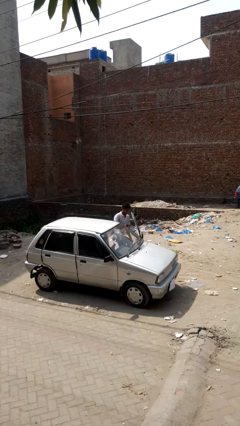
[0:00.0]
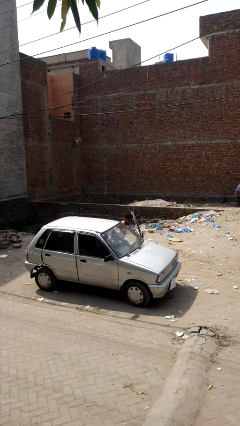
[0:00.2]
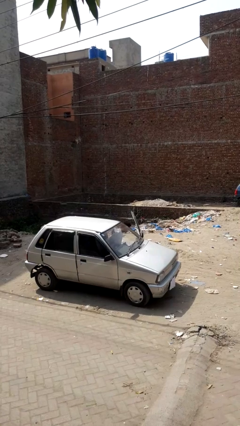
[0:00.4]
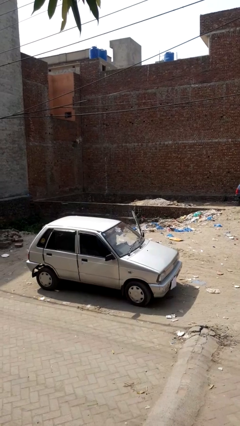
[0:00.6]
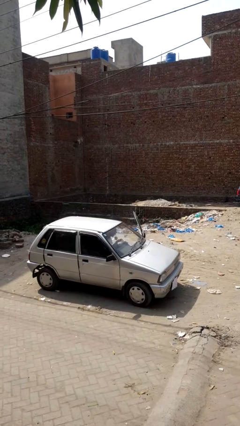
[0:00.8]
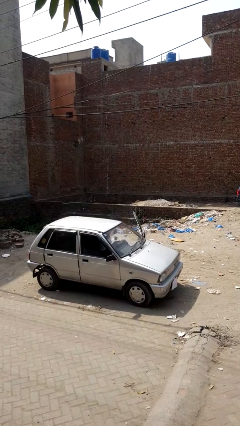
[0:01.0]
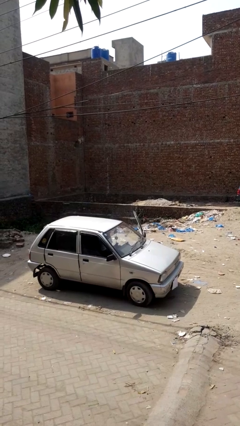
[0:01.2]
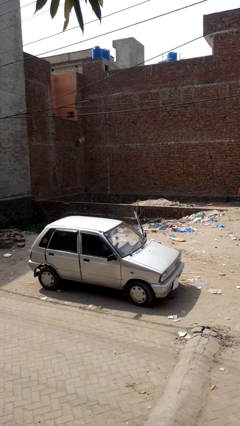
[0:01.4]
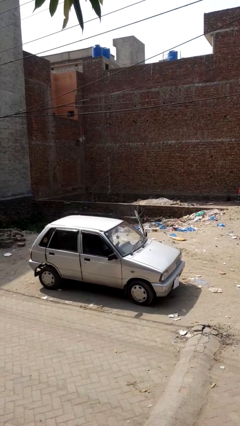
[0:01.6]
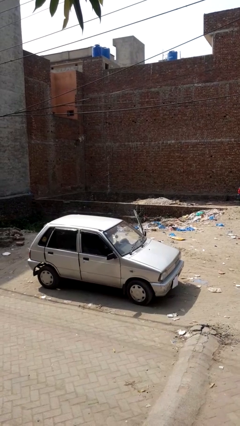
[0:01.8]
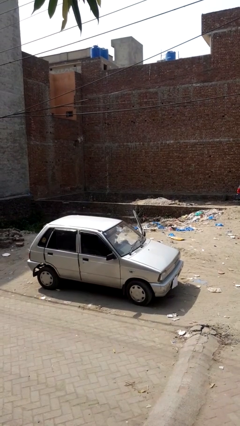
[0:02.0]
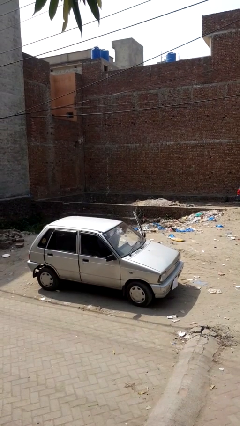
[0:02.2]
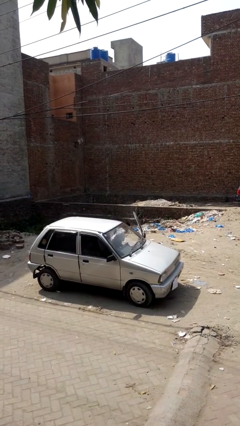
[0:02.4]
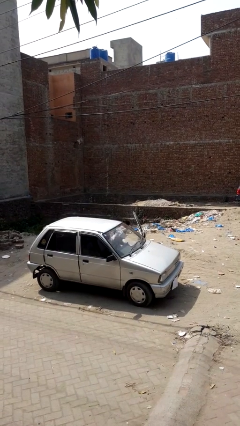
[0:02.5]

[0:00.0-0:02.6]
person enters car

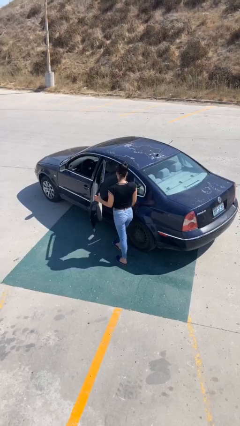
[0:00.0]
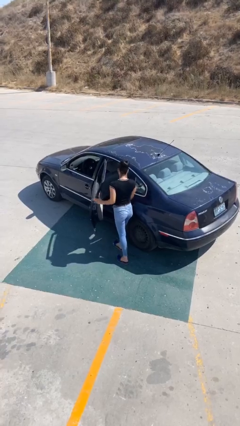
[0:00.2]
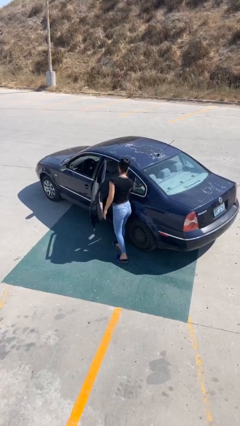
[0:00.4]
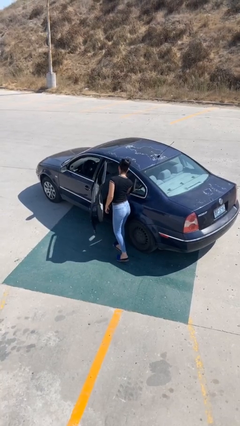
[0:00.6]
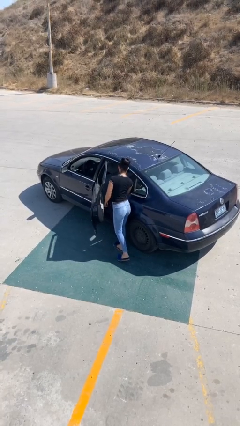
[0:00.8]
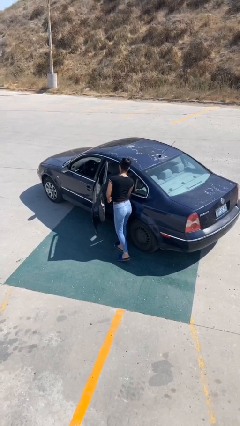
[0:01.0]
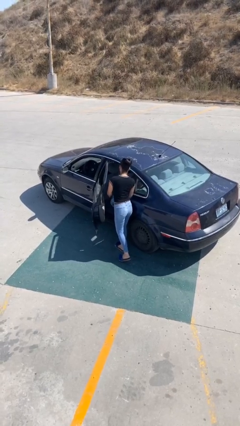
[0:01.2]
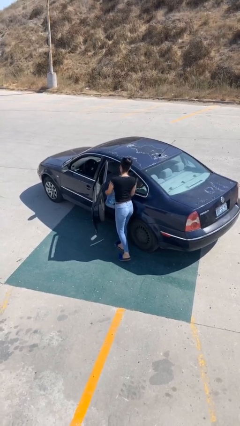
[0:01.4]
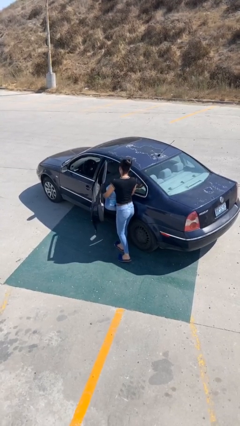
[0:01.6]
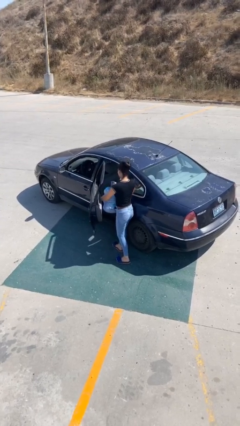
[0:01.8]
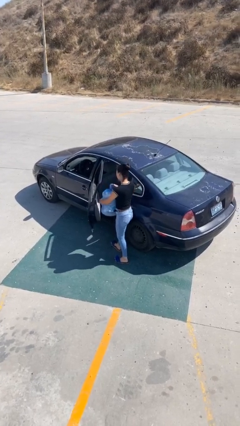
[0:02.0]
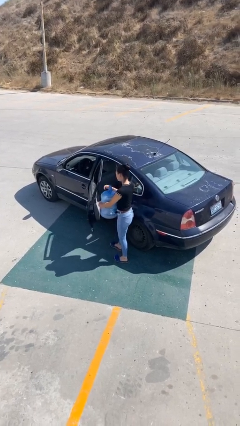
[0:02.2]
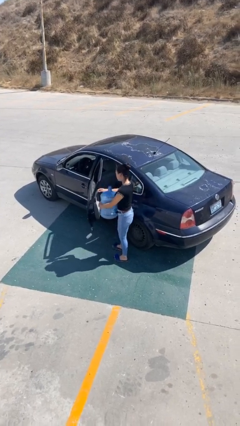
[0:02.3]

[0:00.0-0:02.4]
person unloads car

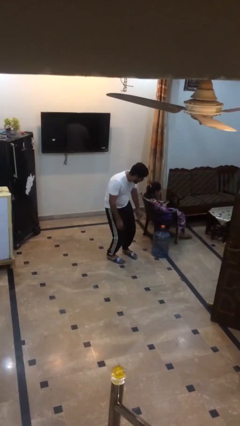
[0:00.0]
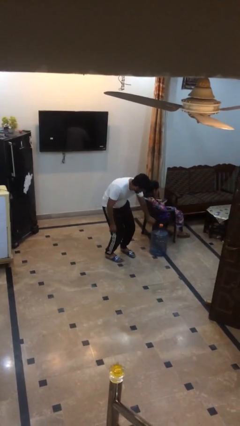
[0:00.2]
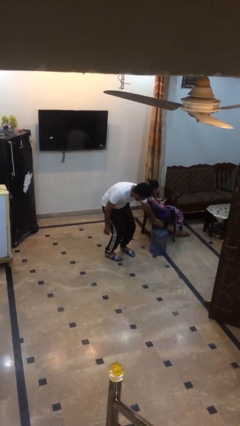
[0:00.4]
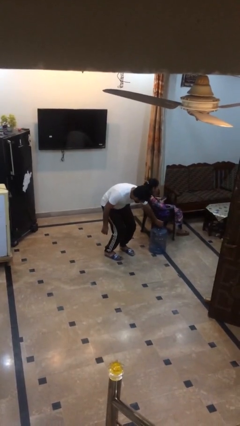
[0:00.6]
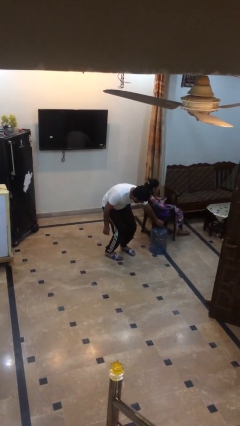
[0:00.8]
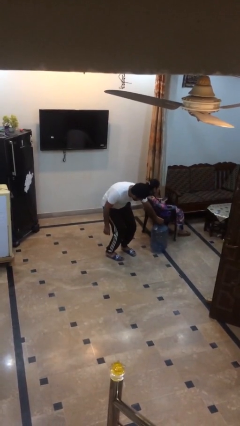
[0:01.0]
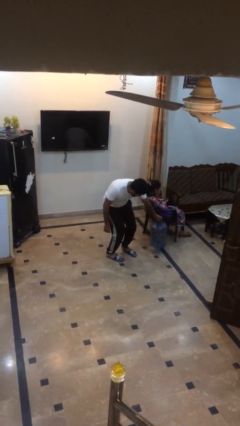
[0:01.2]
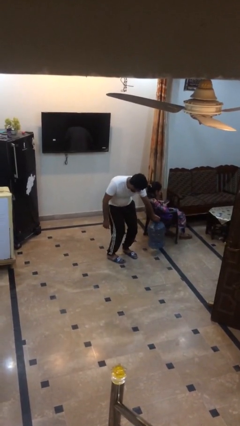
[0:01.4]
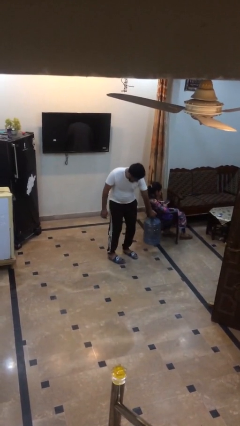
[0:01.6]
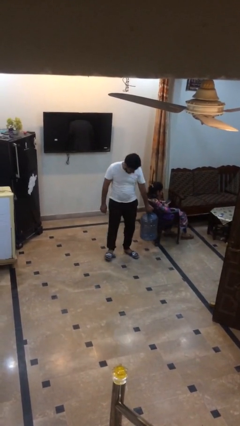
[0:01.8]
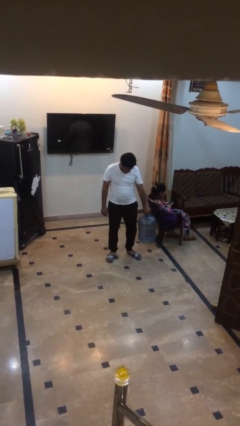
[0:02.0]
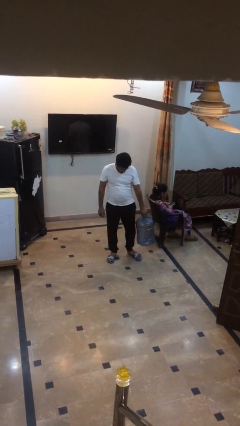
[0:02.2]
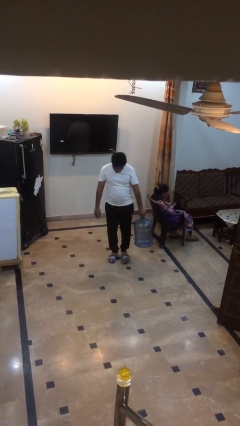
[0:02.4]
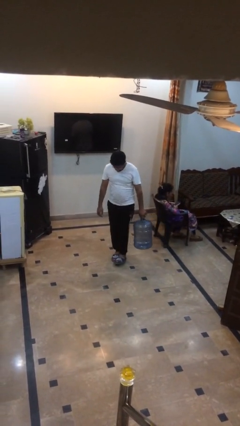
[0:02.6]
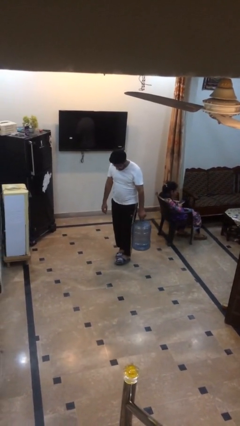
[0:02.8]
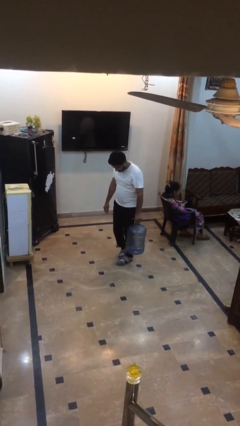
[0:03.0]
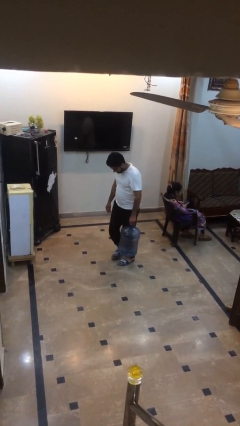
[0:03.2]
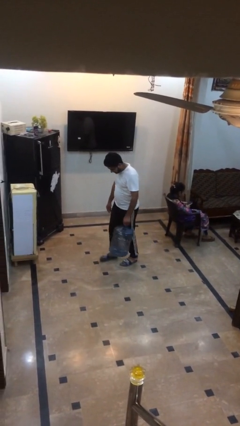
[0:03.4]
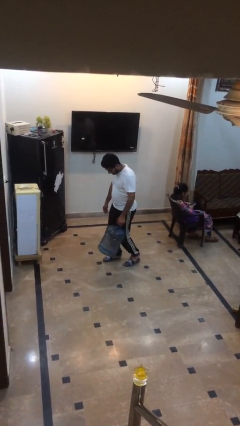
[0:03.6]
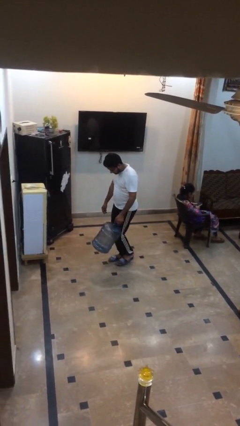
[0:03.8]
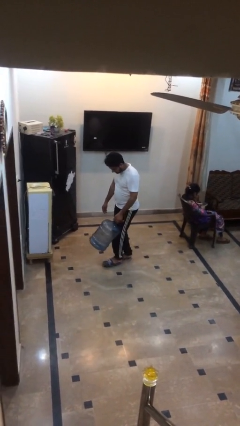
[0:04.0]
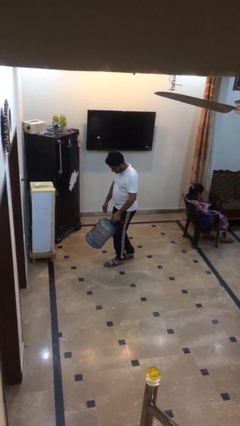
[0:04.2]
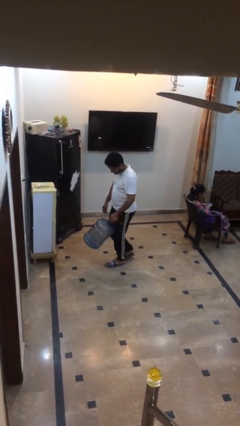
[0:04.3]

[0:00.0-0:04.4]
person steals object from person

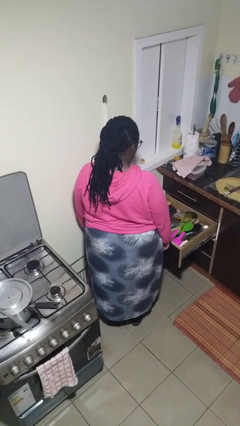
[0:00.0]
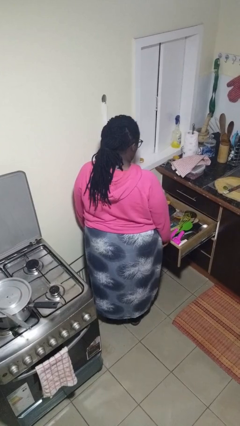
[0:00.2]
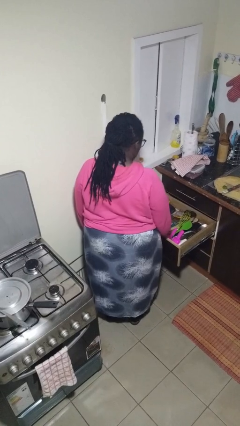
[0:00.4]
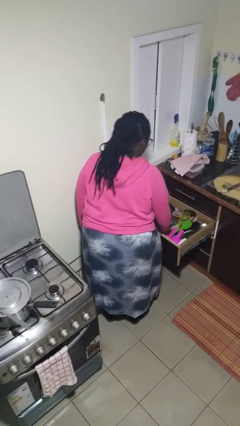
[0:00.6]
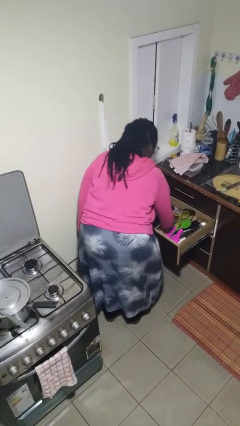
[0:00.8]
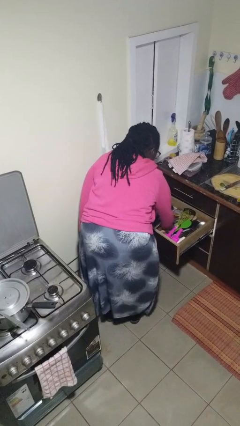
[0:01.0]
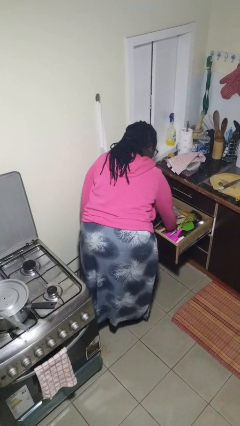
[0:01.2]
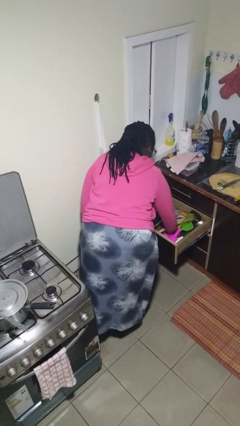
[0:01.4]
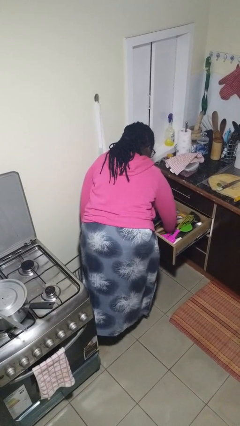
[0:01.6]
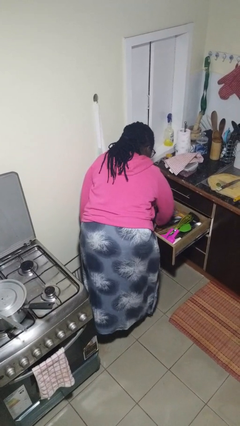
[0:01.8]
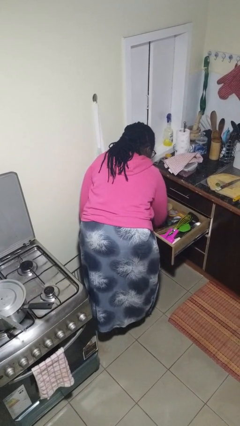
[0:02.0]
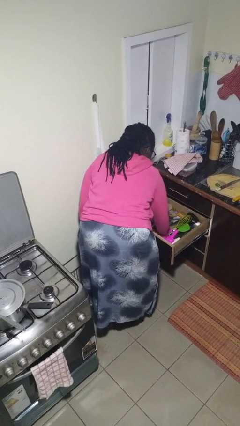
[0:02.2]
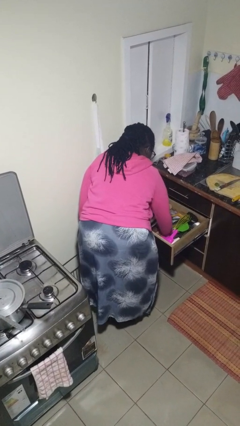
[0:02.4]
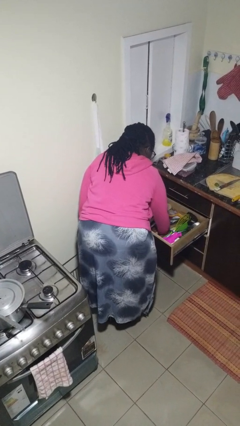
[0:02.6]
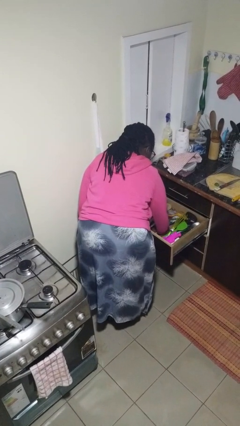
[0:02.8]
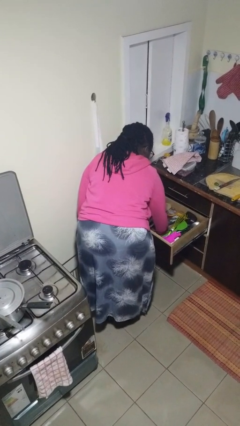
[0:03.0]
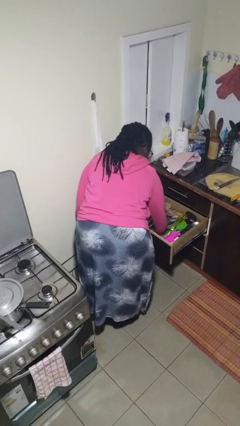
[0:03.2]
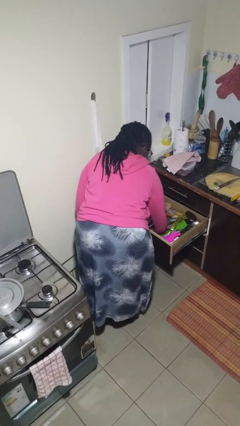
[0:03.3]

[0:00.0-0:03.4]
person searches in kitchen drawer

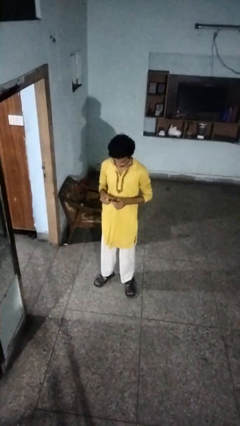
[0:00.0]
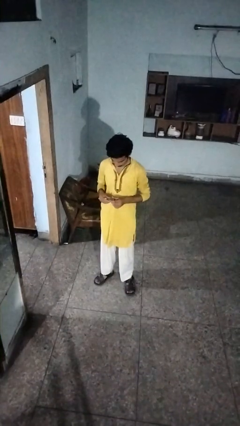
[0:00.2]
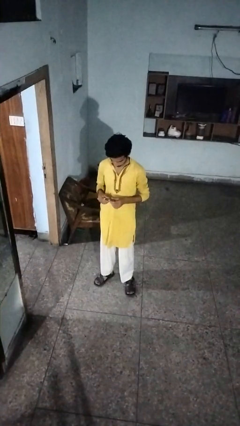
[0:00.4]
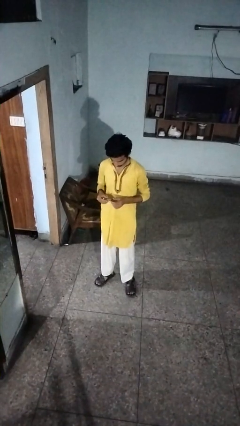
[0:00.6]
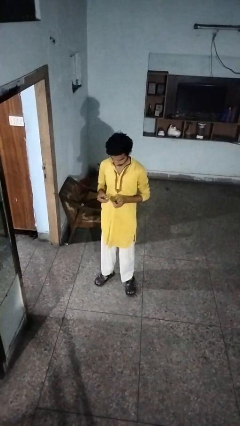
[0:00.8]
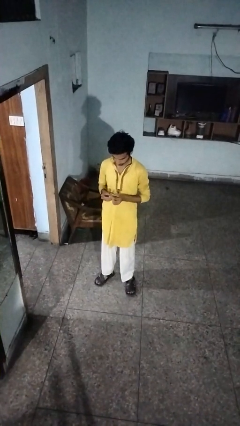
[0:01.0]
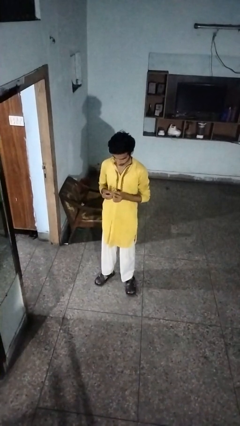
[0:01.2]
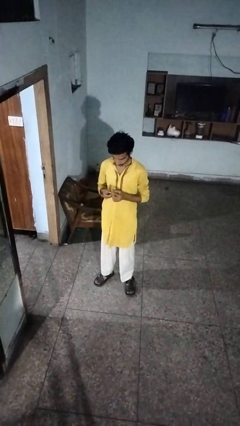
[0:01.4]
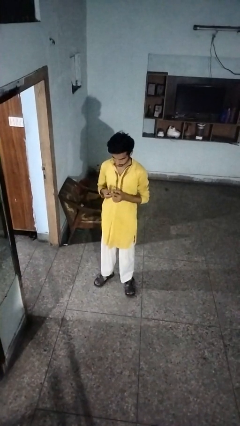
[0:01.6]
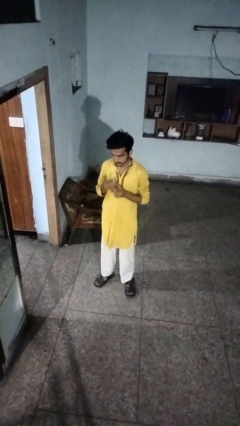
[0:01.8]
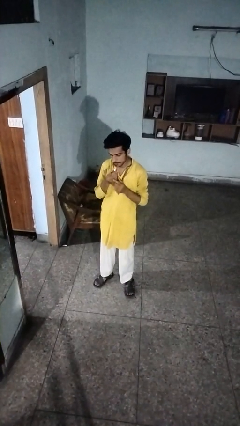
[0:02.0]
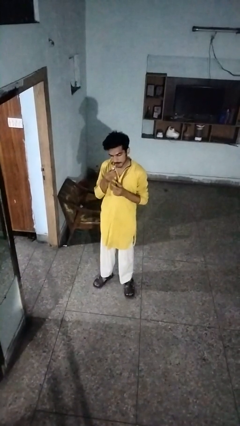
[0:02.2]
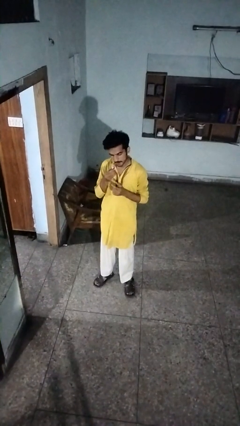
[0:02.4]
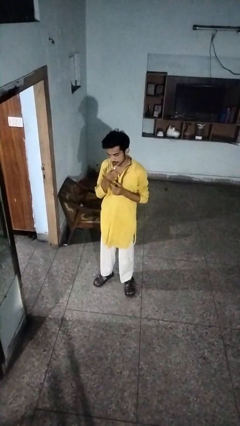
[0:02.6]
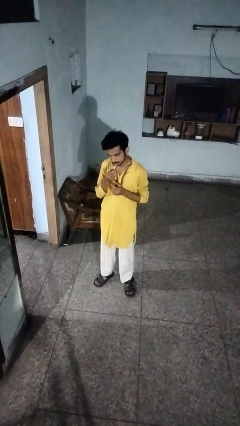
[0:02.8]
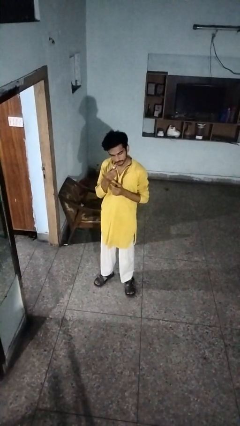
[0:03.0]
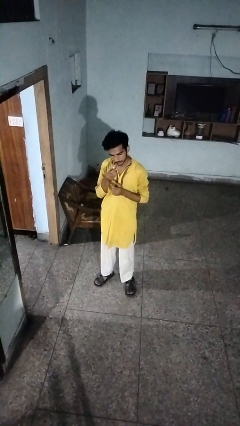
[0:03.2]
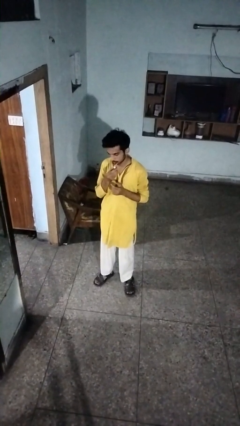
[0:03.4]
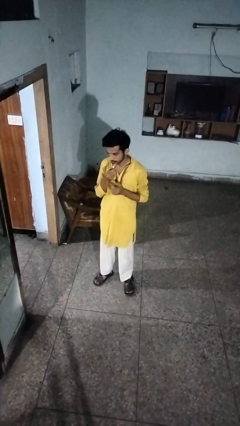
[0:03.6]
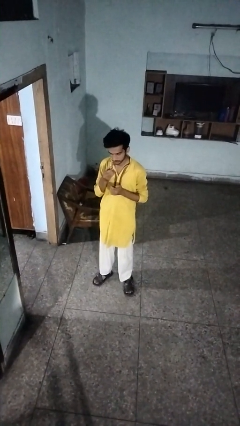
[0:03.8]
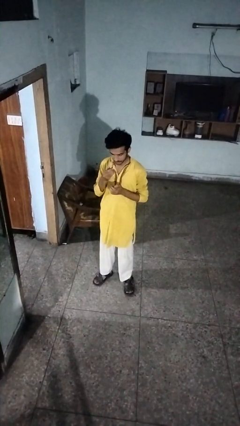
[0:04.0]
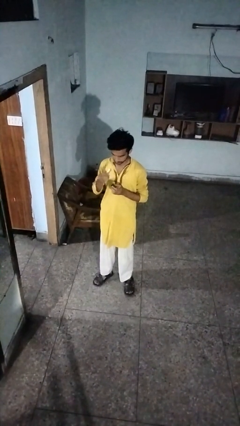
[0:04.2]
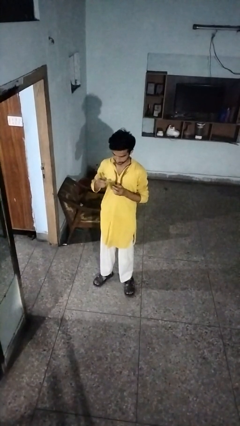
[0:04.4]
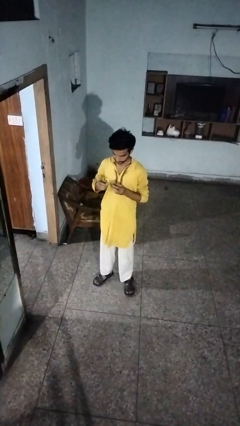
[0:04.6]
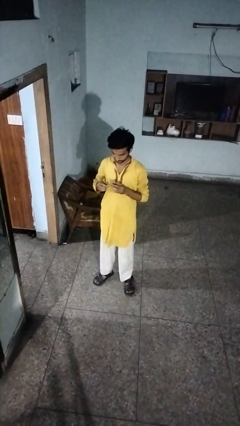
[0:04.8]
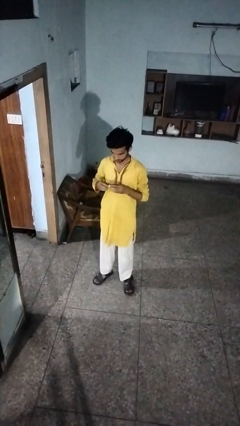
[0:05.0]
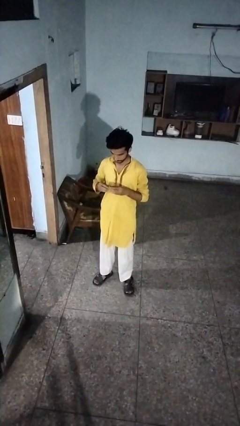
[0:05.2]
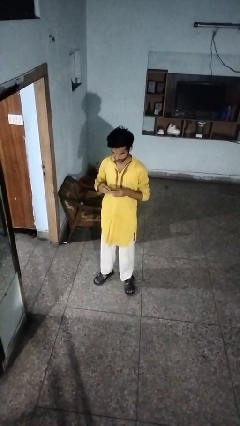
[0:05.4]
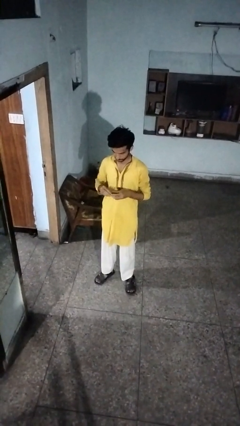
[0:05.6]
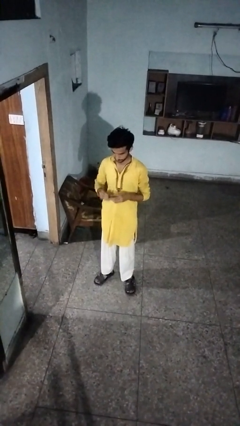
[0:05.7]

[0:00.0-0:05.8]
person applies lip makeup
